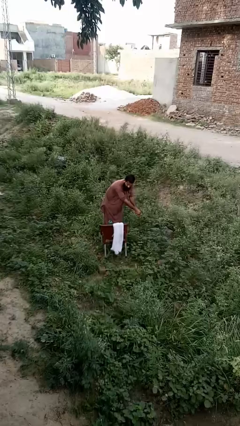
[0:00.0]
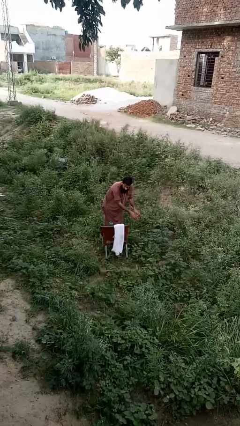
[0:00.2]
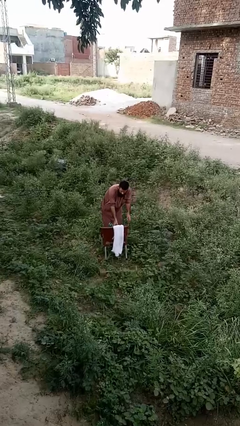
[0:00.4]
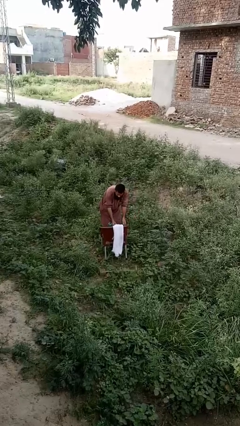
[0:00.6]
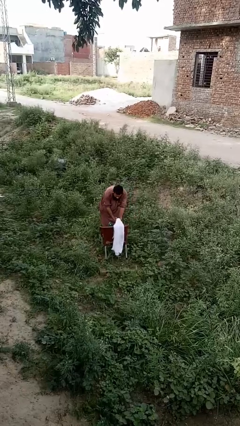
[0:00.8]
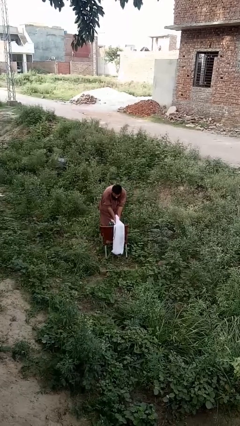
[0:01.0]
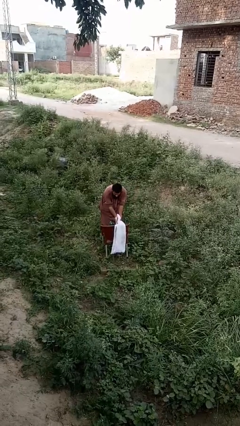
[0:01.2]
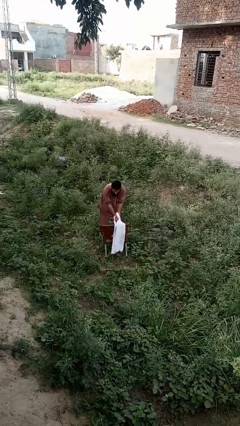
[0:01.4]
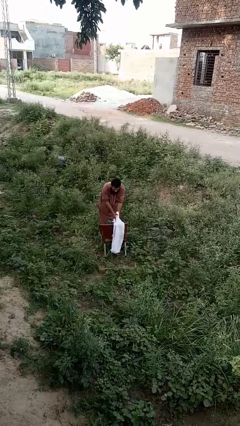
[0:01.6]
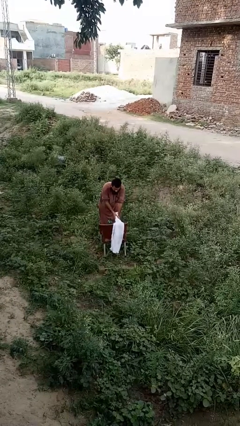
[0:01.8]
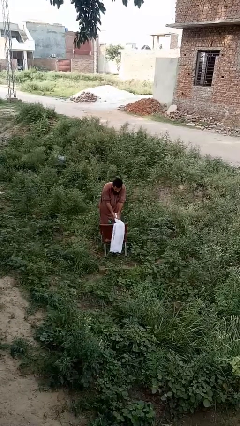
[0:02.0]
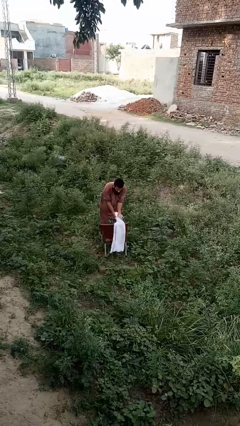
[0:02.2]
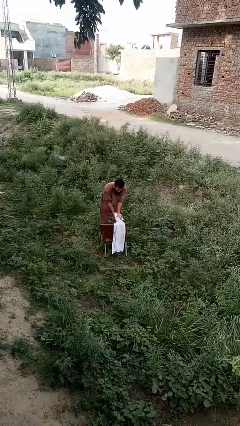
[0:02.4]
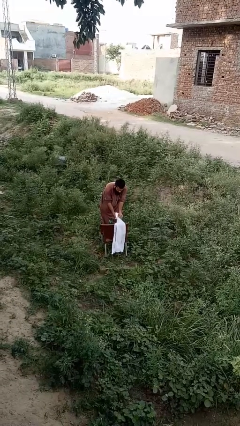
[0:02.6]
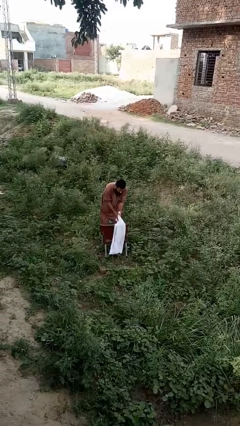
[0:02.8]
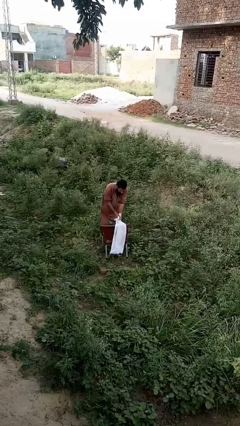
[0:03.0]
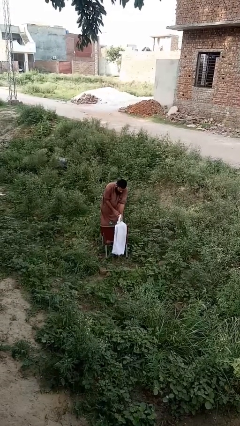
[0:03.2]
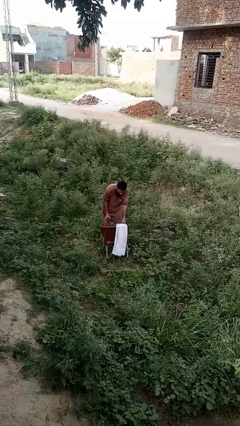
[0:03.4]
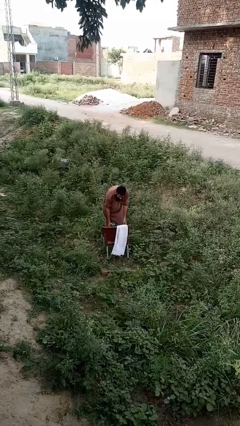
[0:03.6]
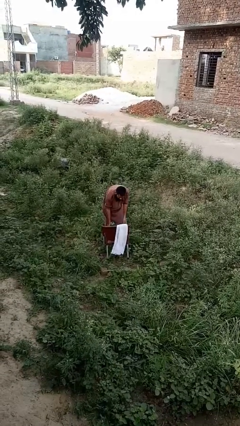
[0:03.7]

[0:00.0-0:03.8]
person dries hands with towel

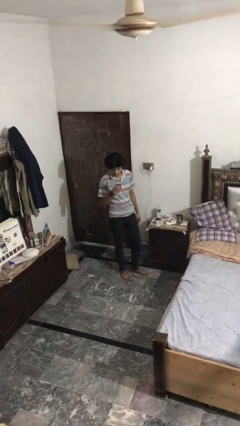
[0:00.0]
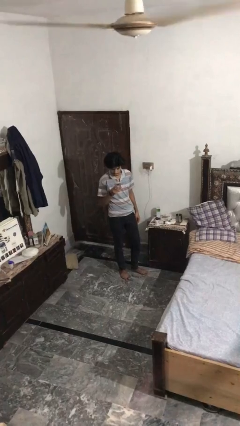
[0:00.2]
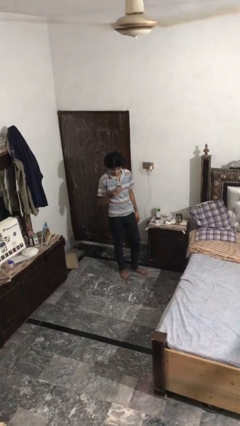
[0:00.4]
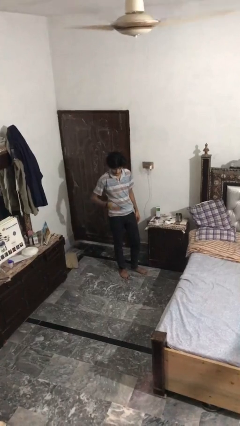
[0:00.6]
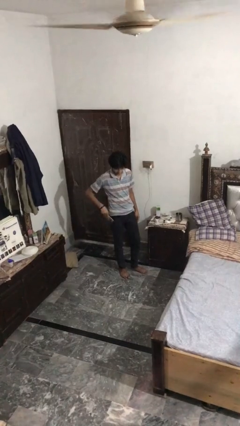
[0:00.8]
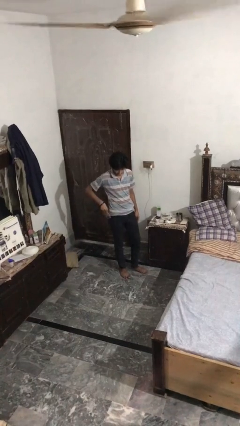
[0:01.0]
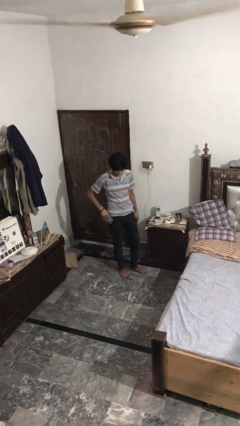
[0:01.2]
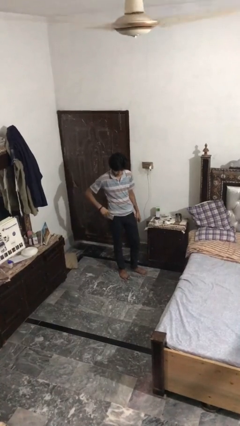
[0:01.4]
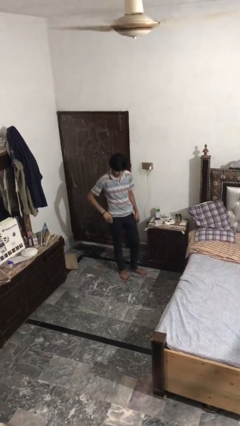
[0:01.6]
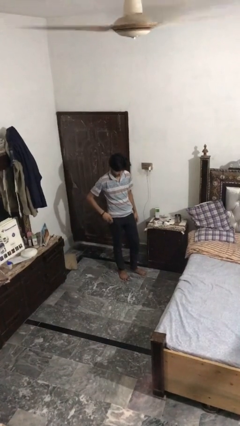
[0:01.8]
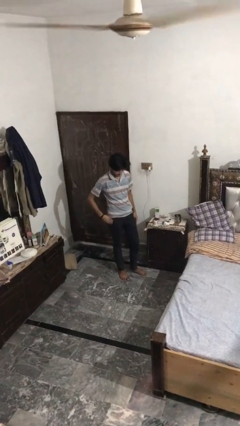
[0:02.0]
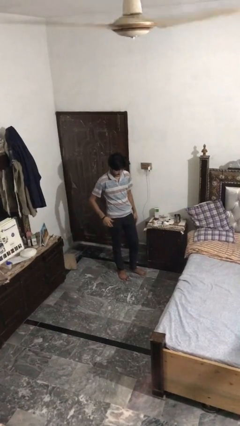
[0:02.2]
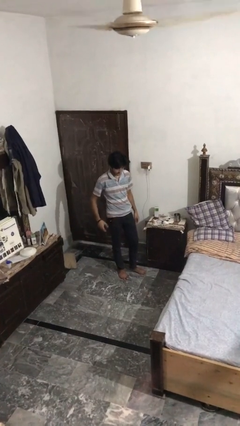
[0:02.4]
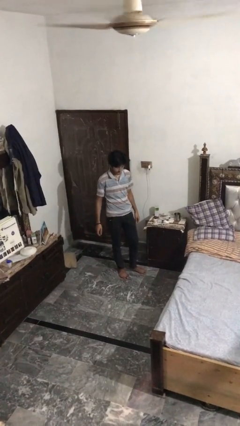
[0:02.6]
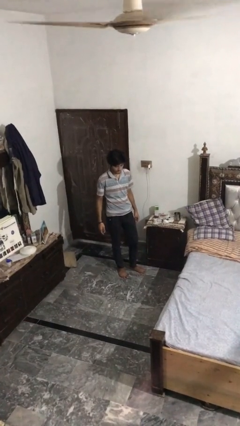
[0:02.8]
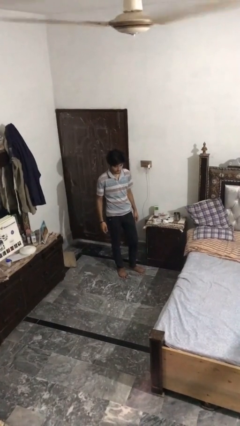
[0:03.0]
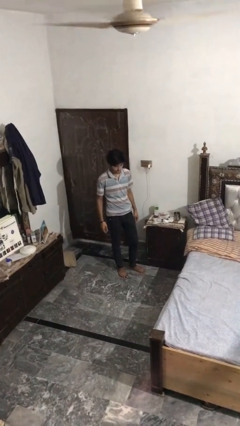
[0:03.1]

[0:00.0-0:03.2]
person puts phone into pocket

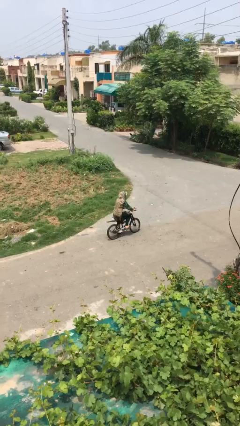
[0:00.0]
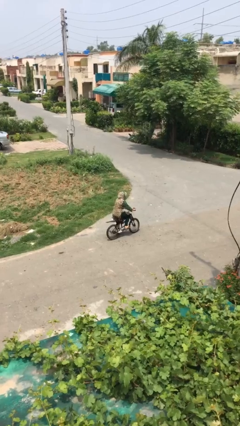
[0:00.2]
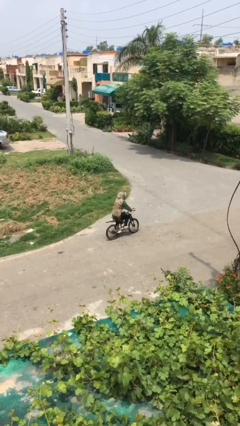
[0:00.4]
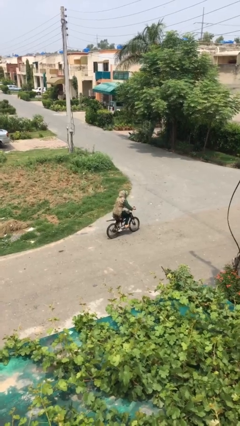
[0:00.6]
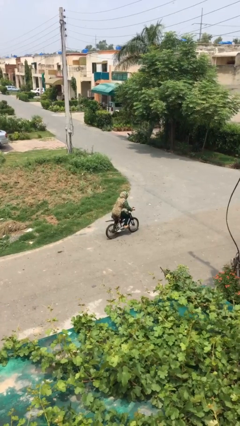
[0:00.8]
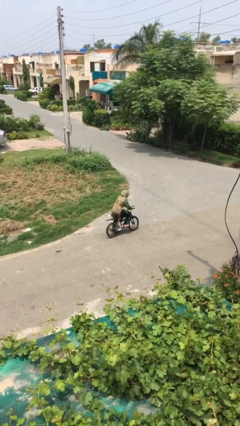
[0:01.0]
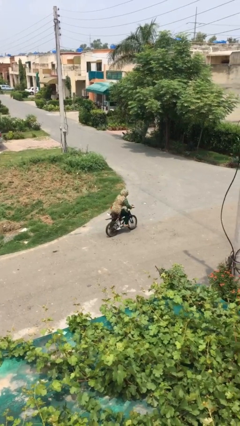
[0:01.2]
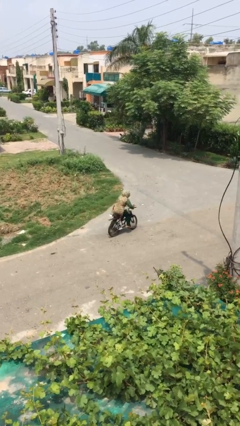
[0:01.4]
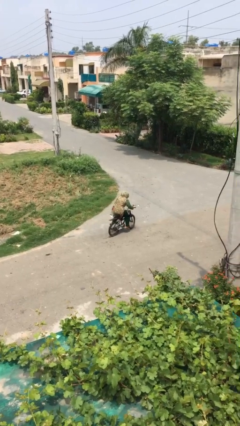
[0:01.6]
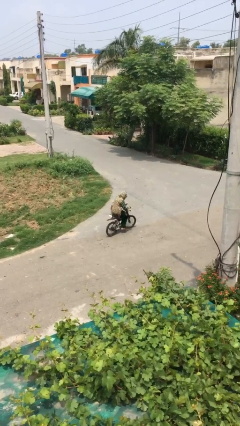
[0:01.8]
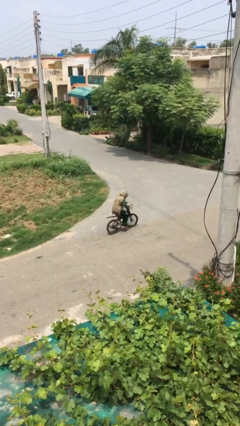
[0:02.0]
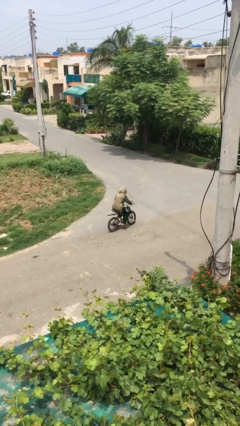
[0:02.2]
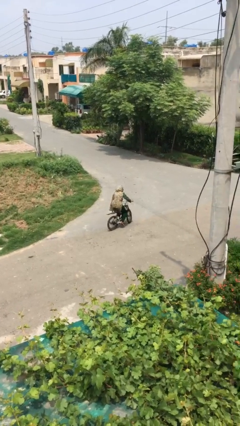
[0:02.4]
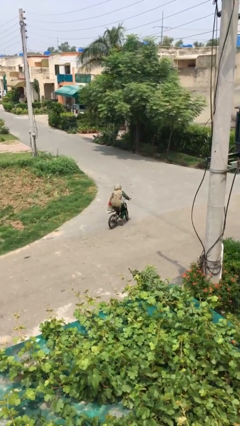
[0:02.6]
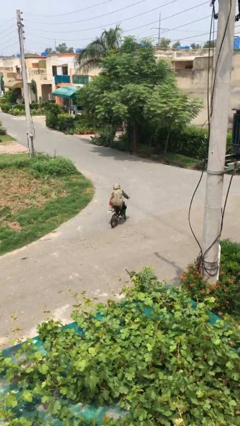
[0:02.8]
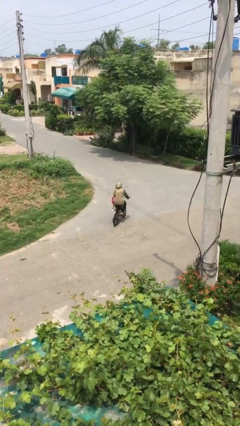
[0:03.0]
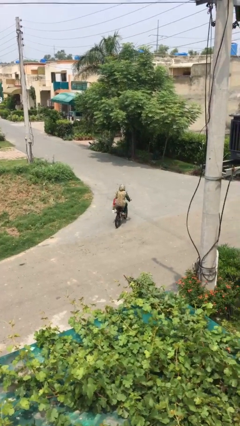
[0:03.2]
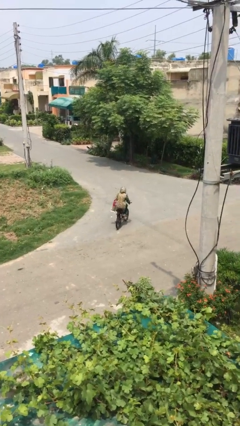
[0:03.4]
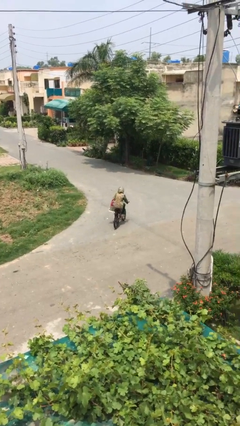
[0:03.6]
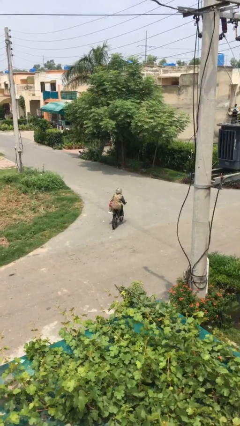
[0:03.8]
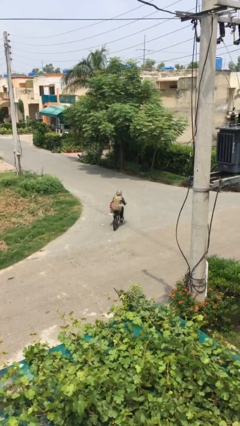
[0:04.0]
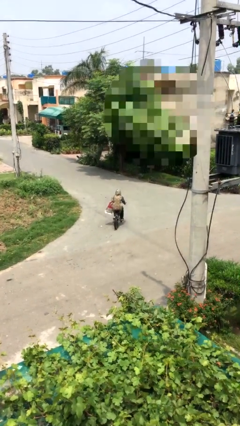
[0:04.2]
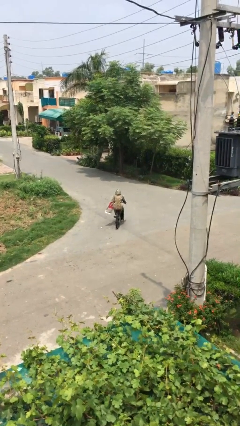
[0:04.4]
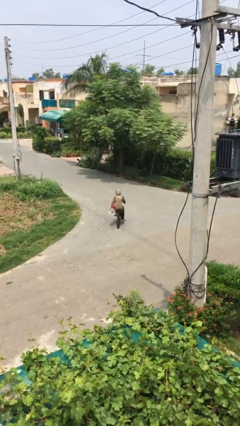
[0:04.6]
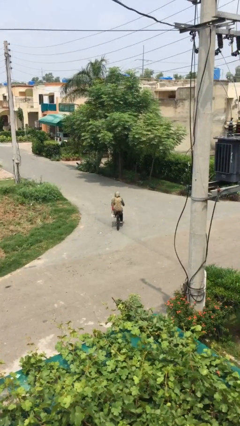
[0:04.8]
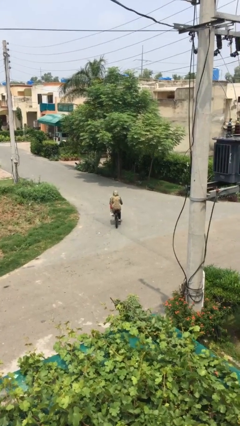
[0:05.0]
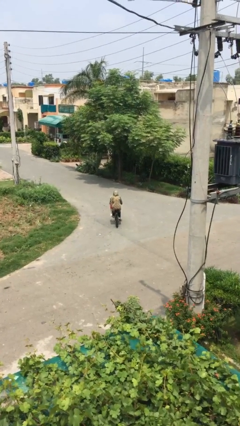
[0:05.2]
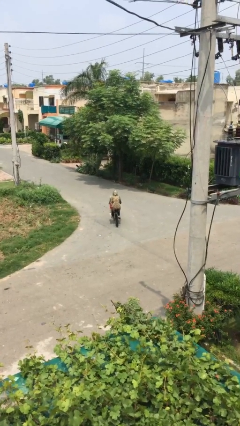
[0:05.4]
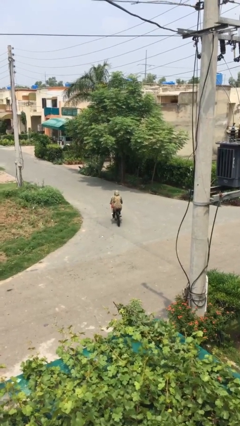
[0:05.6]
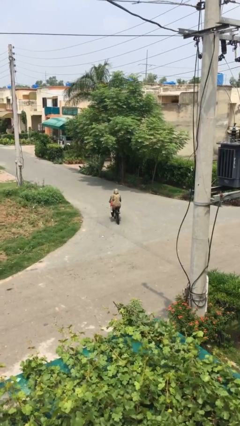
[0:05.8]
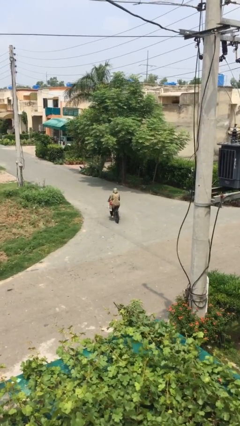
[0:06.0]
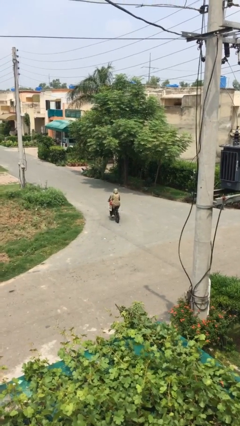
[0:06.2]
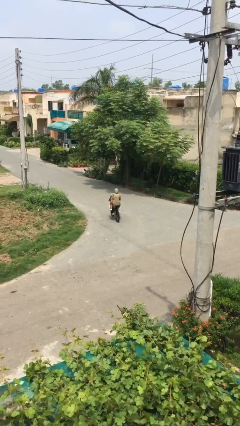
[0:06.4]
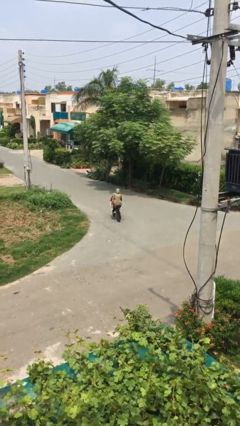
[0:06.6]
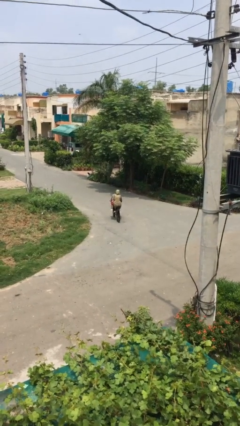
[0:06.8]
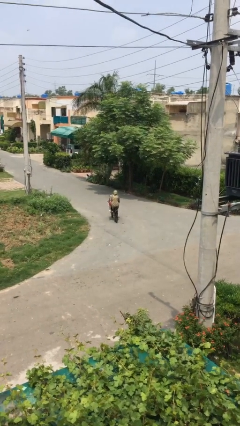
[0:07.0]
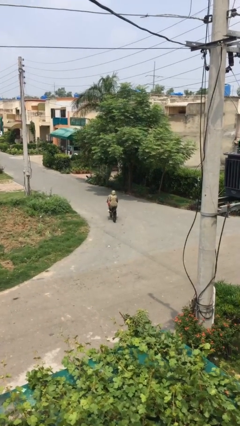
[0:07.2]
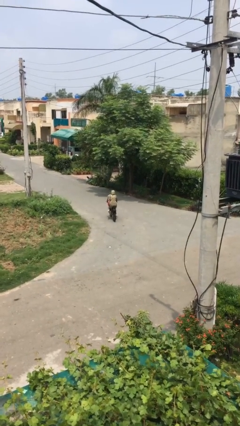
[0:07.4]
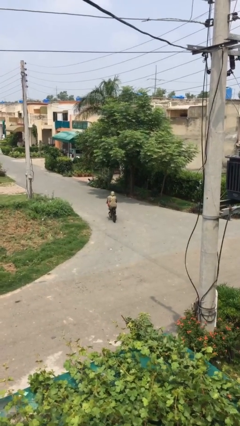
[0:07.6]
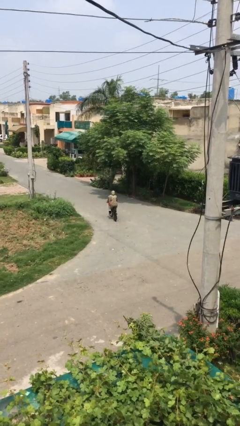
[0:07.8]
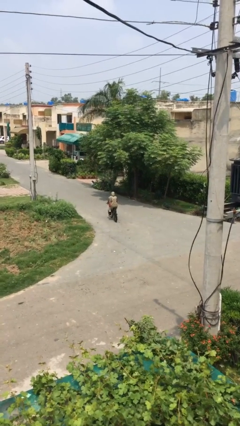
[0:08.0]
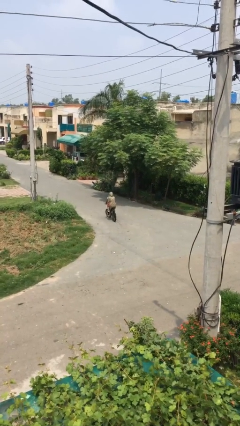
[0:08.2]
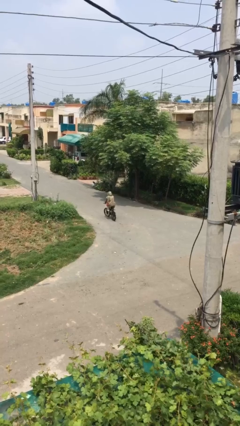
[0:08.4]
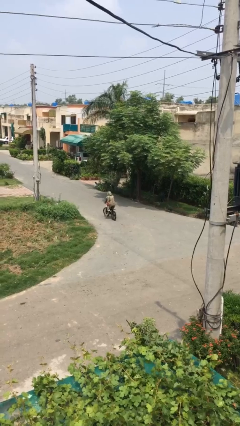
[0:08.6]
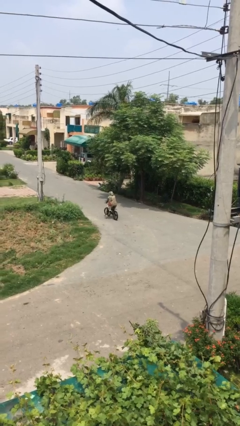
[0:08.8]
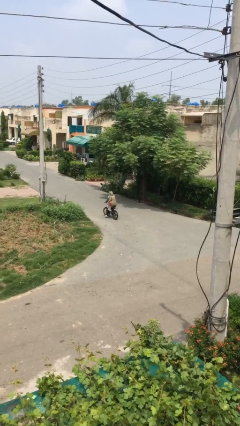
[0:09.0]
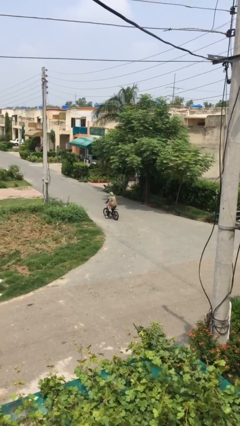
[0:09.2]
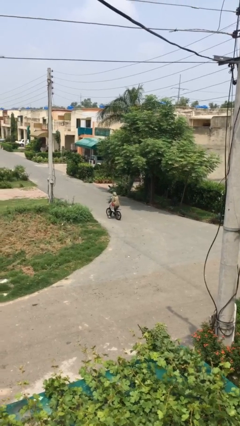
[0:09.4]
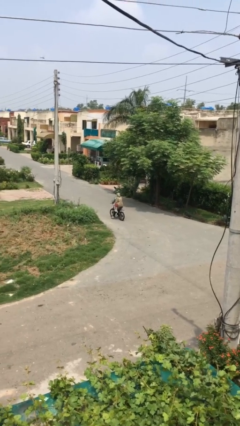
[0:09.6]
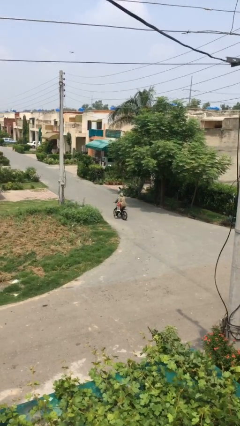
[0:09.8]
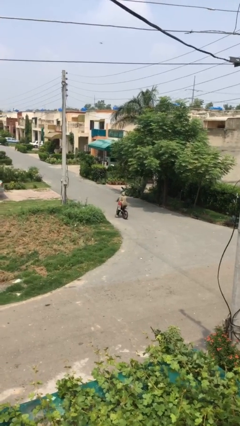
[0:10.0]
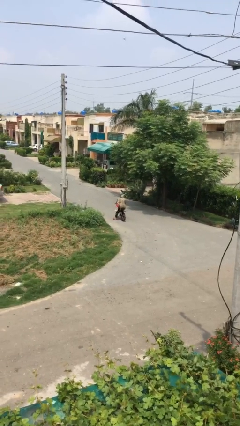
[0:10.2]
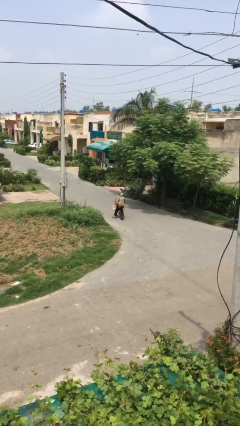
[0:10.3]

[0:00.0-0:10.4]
person rides bicycle

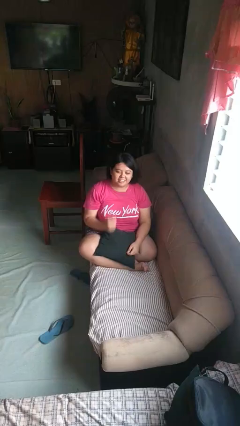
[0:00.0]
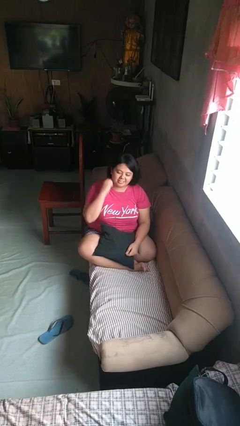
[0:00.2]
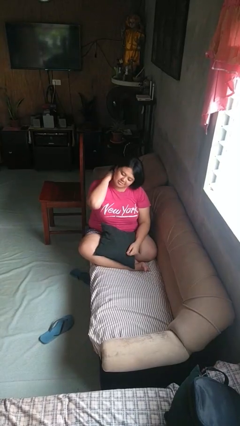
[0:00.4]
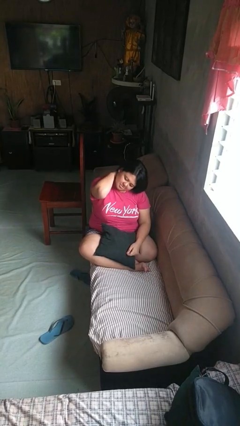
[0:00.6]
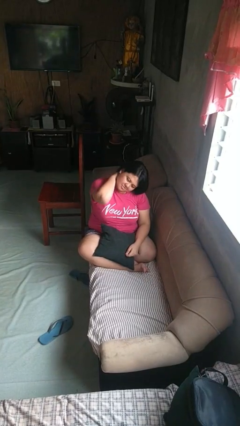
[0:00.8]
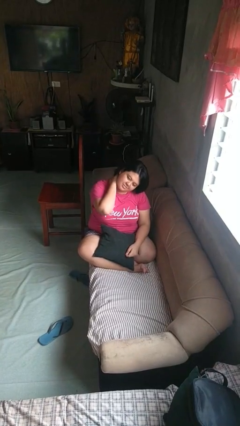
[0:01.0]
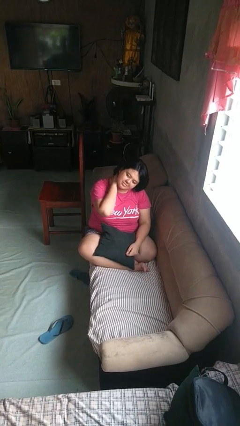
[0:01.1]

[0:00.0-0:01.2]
person rubs neck
